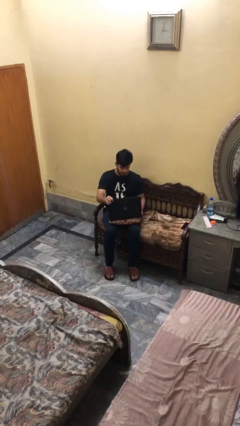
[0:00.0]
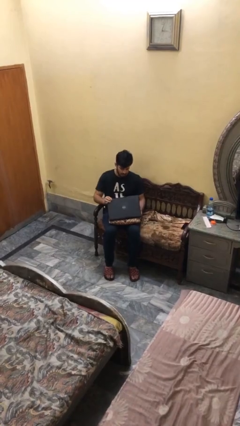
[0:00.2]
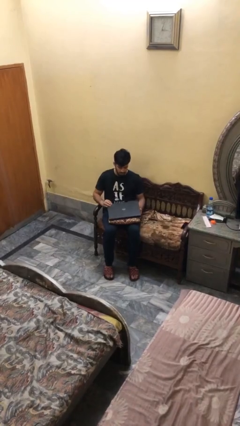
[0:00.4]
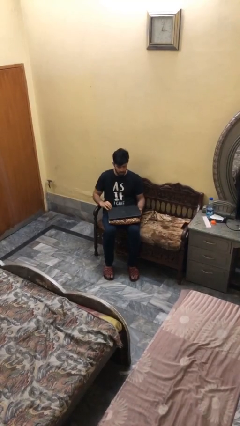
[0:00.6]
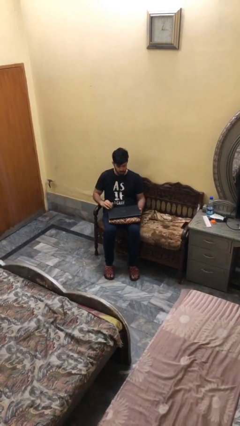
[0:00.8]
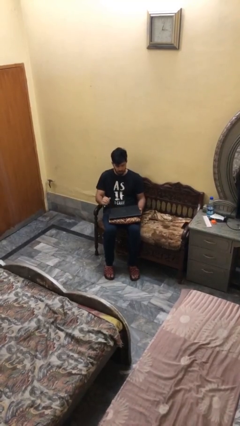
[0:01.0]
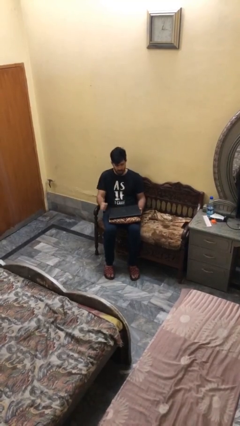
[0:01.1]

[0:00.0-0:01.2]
person closes laptop

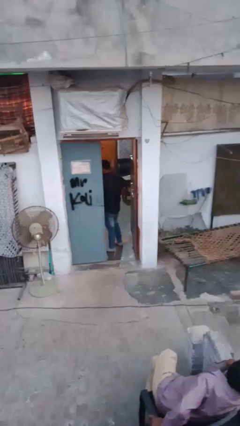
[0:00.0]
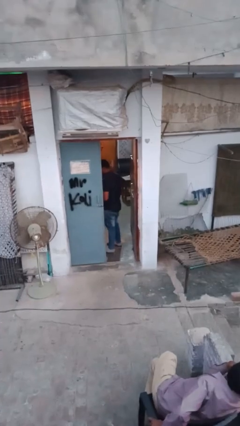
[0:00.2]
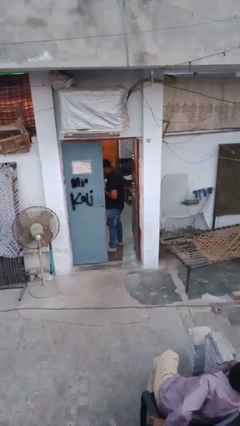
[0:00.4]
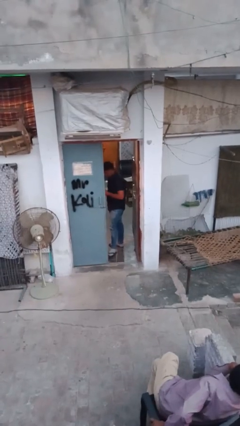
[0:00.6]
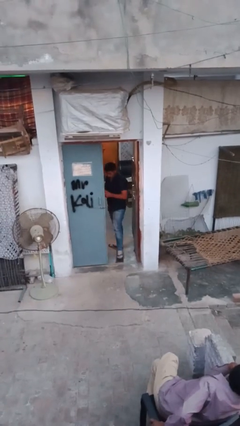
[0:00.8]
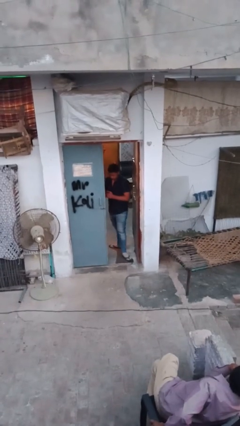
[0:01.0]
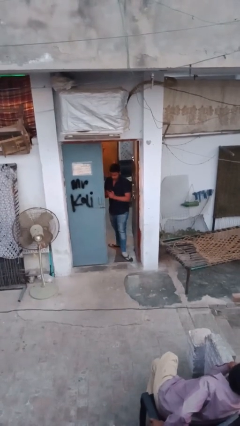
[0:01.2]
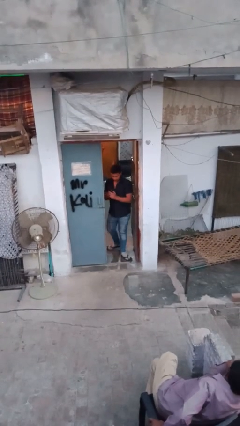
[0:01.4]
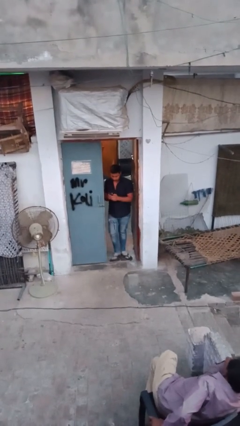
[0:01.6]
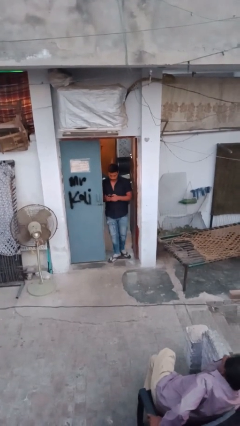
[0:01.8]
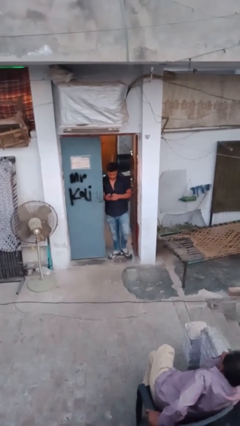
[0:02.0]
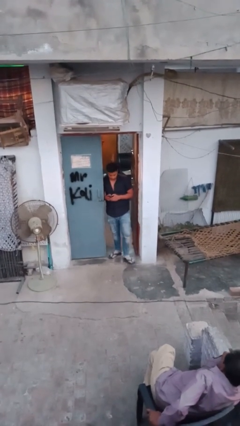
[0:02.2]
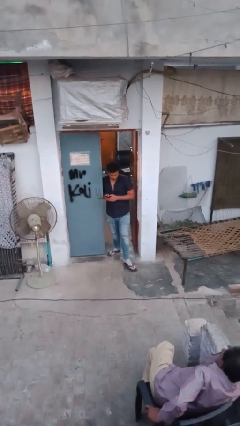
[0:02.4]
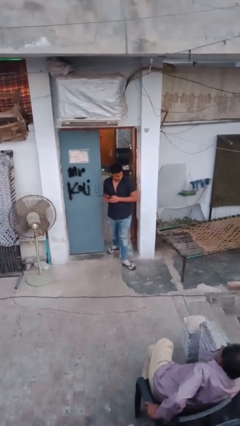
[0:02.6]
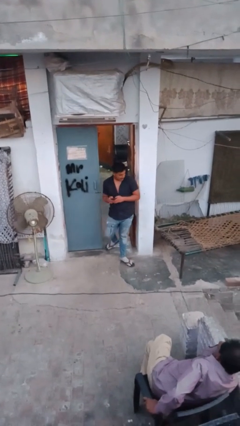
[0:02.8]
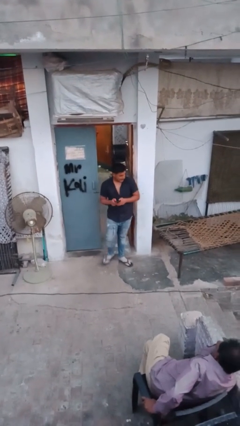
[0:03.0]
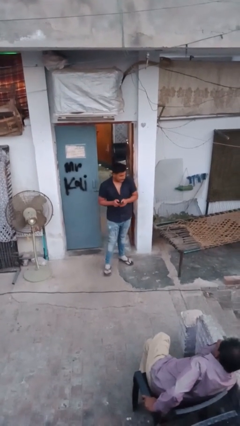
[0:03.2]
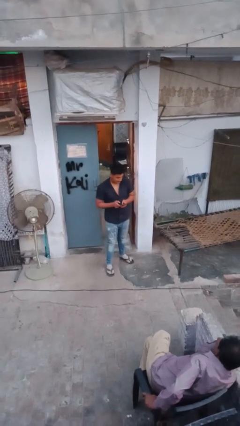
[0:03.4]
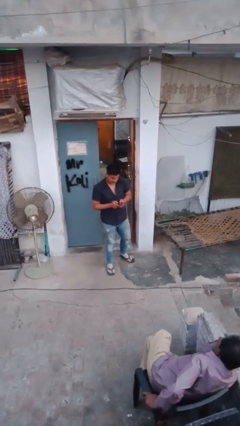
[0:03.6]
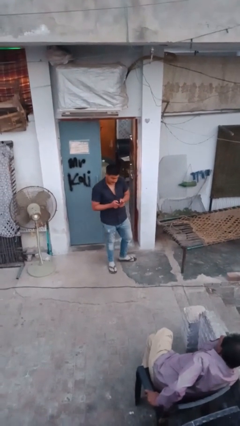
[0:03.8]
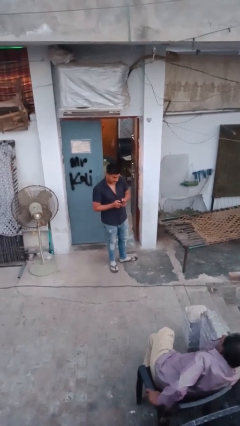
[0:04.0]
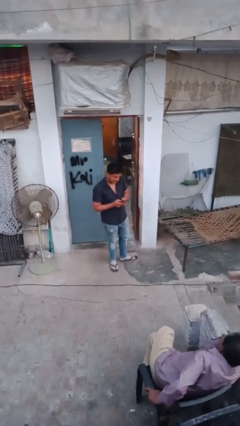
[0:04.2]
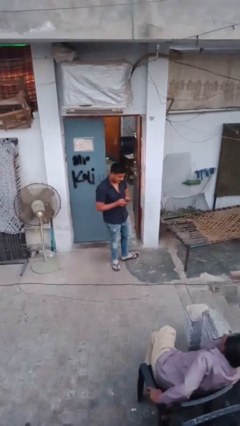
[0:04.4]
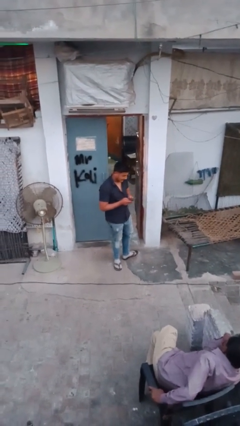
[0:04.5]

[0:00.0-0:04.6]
person enters scene through structure

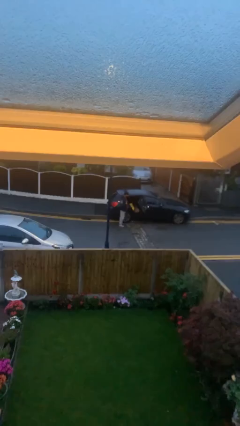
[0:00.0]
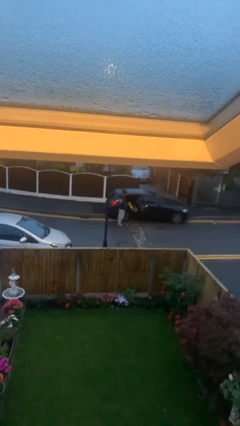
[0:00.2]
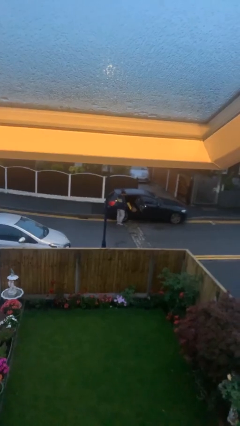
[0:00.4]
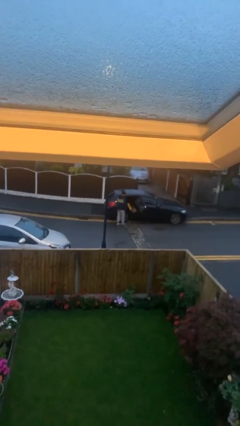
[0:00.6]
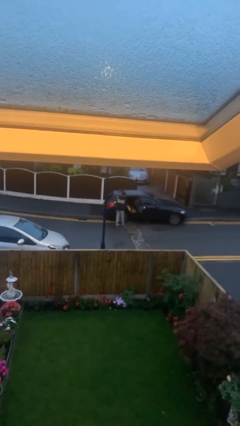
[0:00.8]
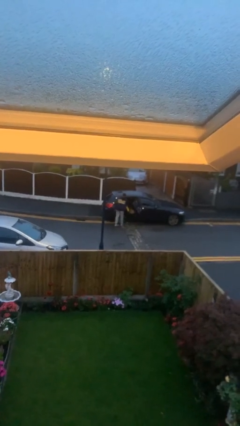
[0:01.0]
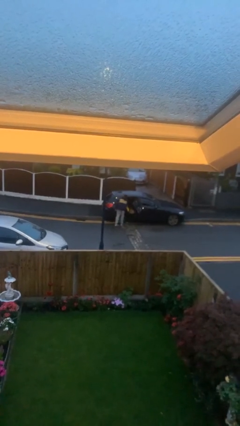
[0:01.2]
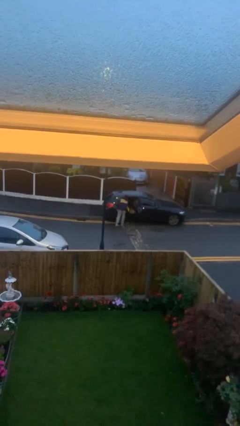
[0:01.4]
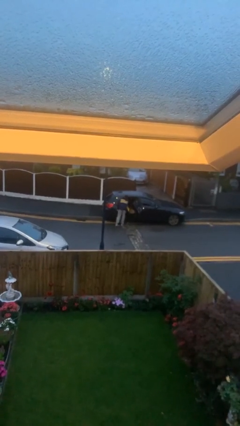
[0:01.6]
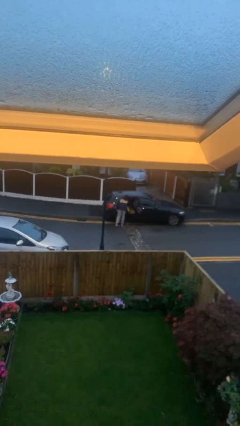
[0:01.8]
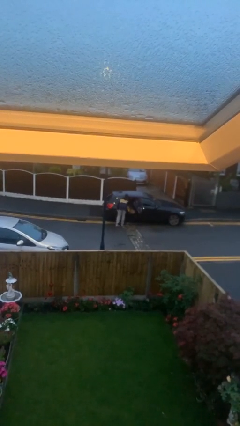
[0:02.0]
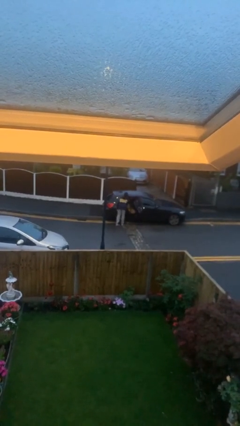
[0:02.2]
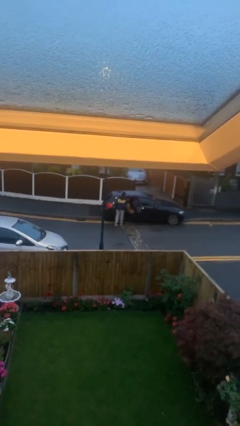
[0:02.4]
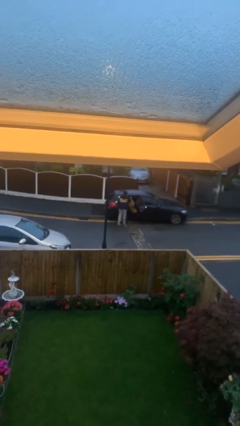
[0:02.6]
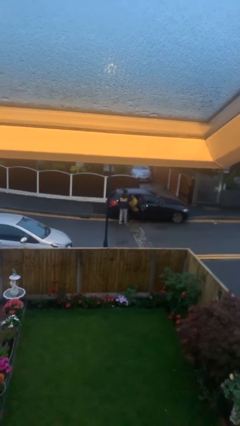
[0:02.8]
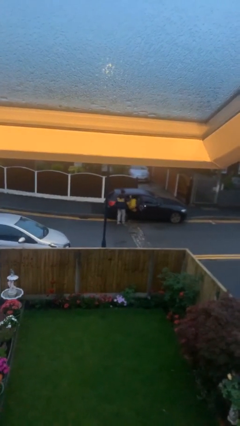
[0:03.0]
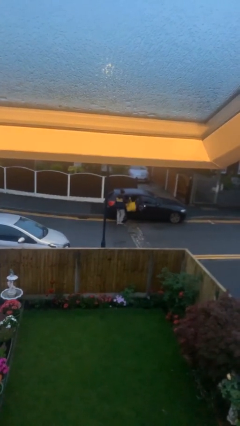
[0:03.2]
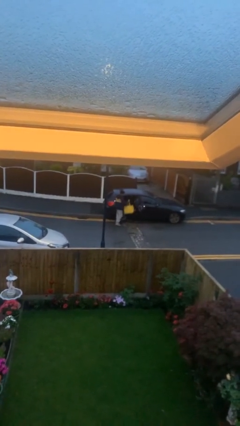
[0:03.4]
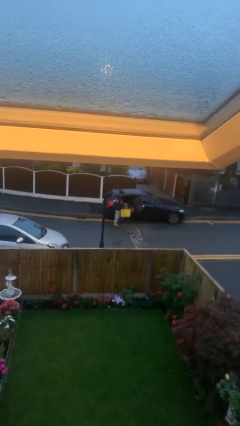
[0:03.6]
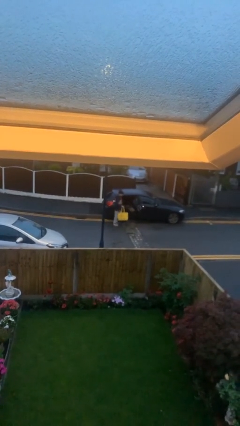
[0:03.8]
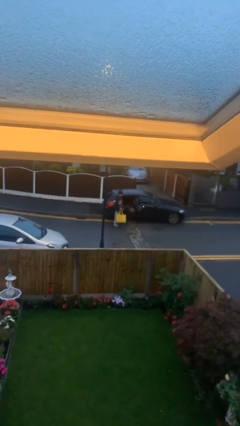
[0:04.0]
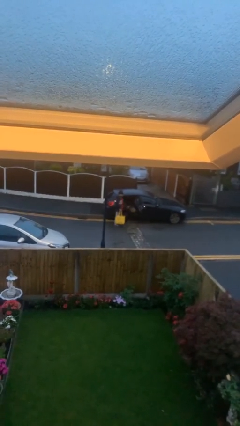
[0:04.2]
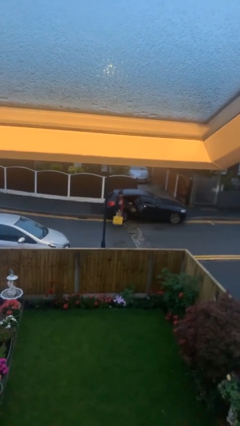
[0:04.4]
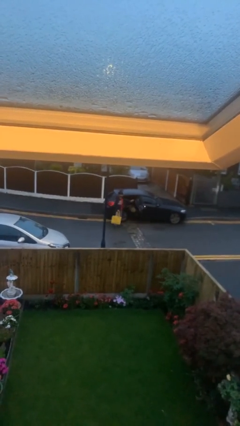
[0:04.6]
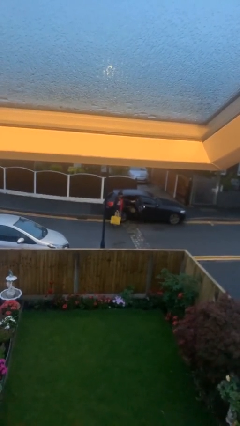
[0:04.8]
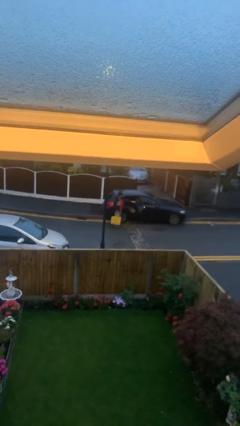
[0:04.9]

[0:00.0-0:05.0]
person unloads car

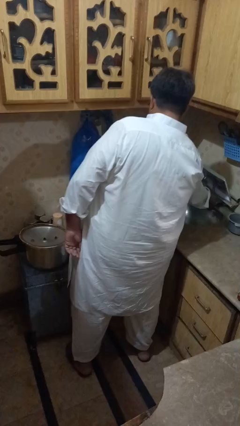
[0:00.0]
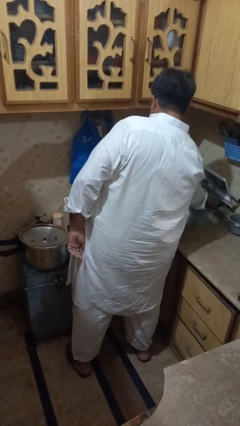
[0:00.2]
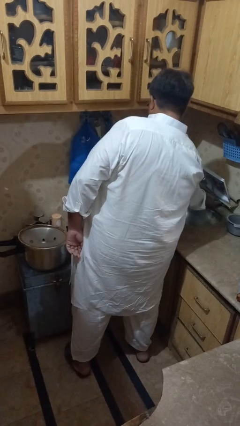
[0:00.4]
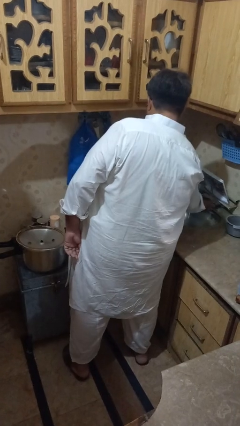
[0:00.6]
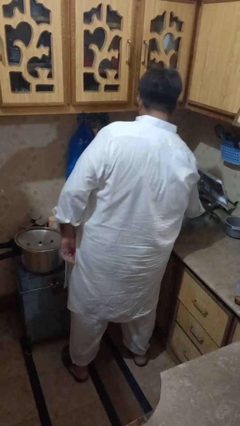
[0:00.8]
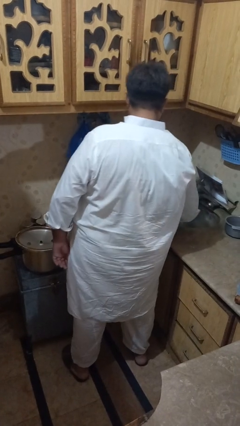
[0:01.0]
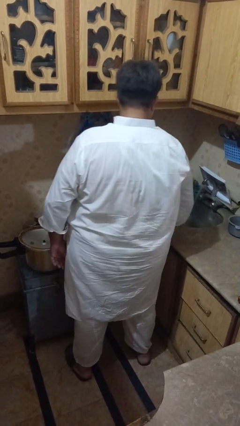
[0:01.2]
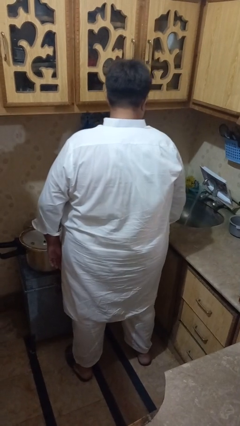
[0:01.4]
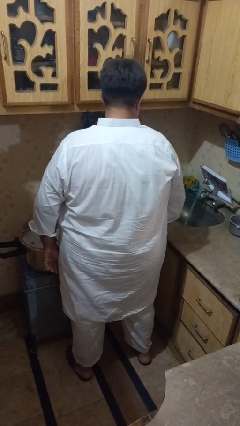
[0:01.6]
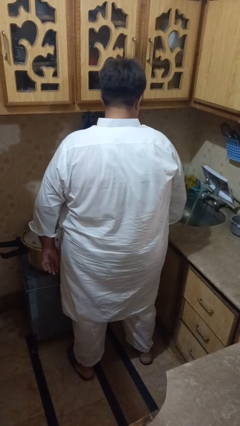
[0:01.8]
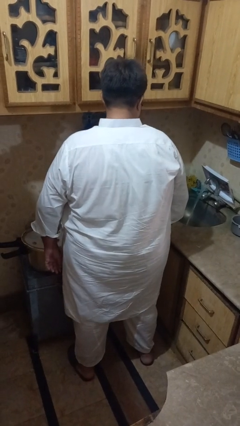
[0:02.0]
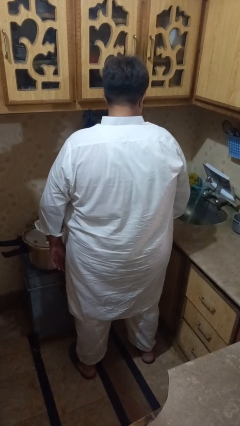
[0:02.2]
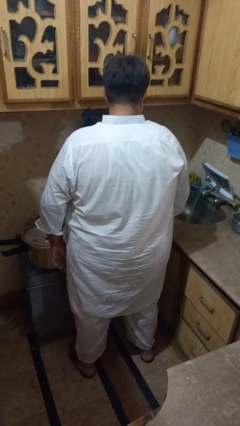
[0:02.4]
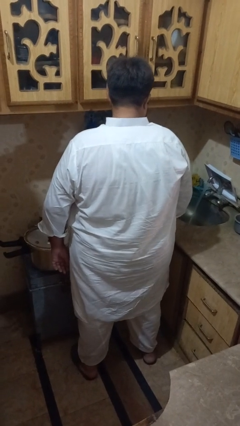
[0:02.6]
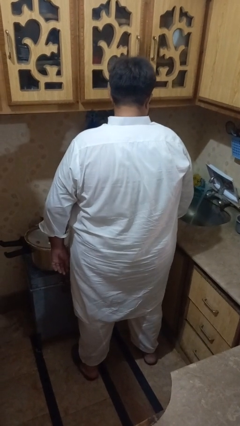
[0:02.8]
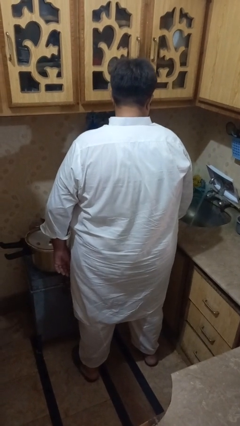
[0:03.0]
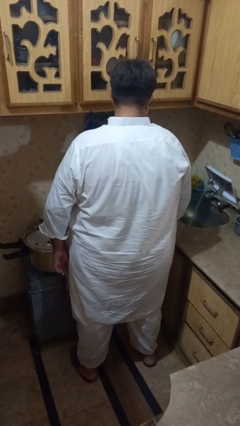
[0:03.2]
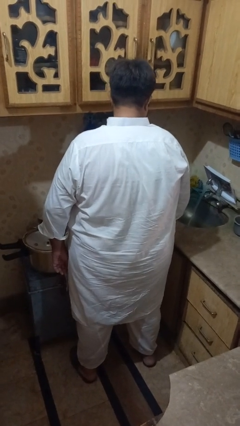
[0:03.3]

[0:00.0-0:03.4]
person turns on faucet

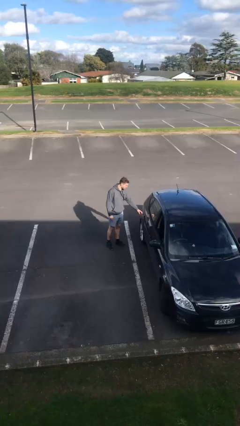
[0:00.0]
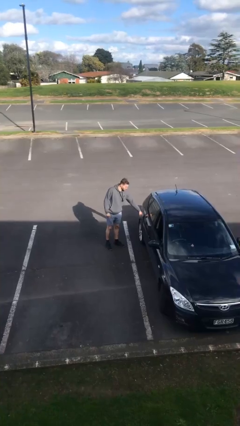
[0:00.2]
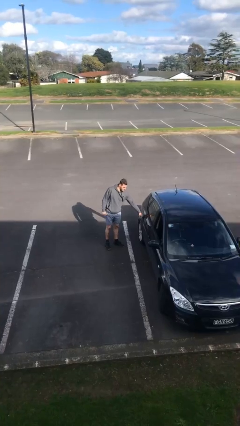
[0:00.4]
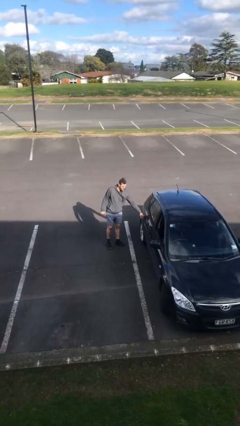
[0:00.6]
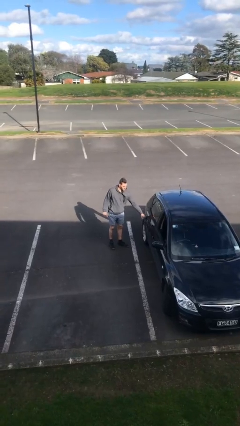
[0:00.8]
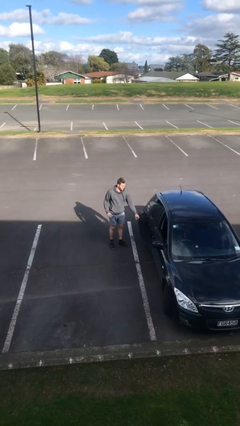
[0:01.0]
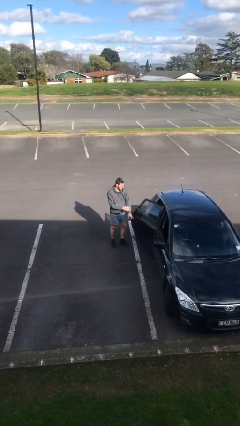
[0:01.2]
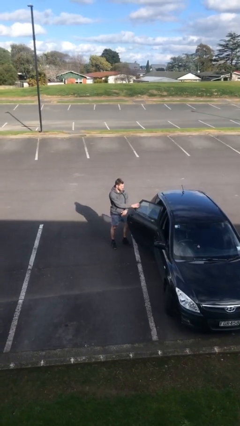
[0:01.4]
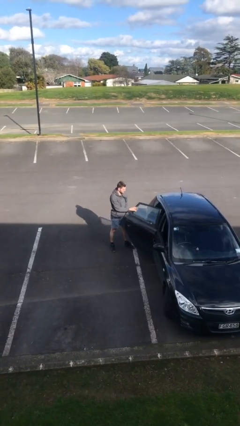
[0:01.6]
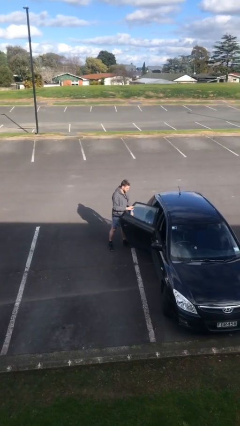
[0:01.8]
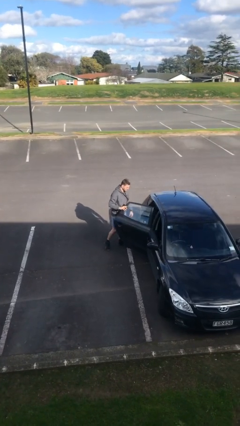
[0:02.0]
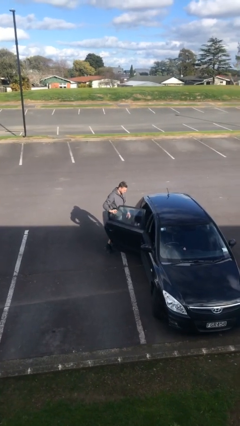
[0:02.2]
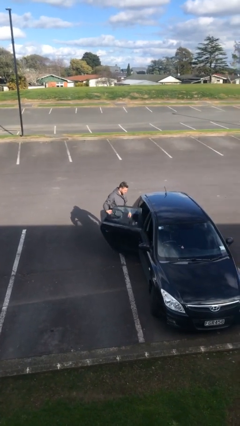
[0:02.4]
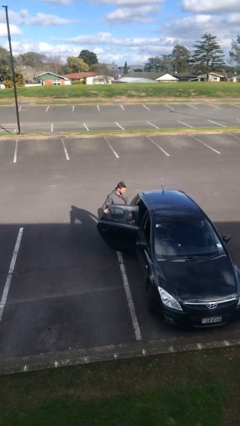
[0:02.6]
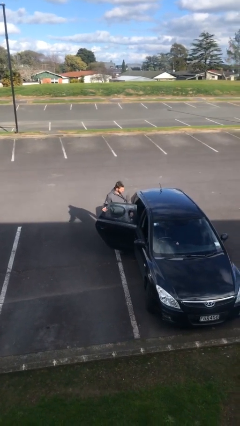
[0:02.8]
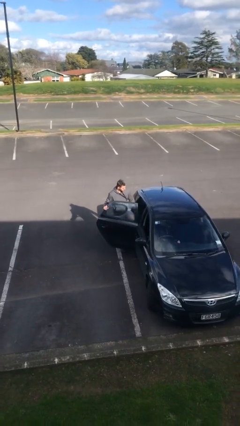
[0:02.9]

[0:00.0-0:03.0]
person opens car door

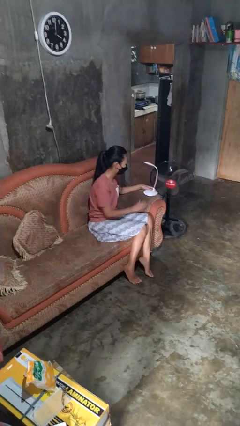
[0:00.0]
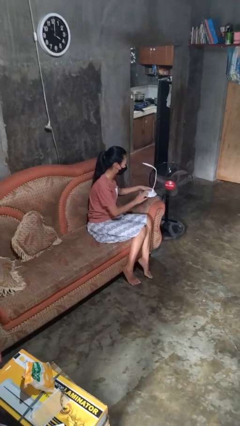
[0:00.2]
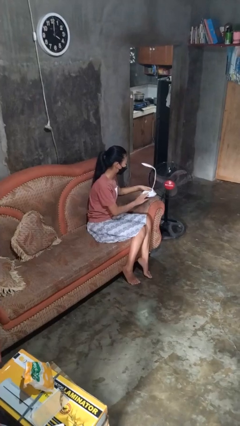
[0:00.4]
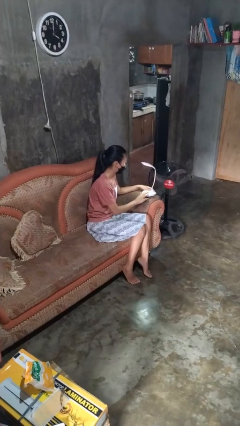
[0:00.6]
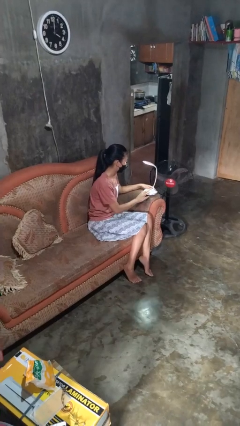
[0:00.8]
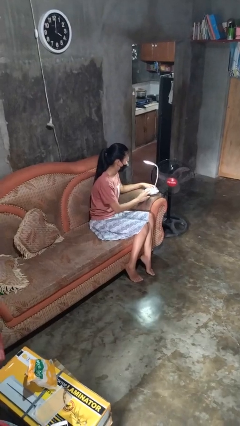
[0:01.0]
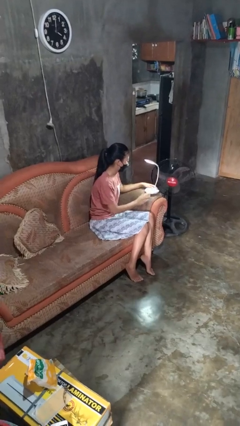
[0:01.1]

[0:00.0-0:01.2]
person turns on lamp
